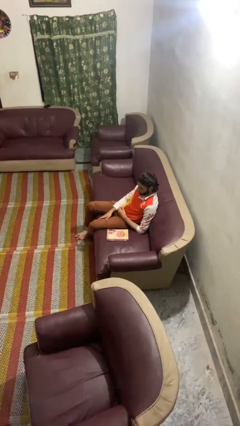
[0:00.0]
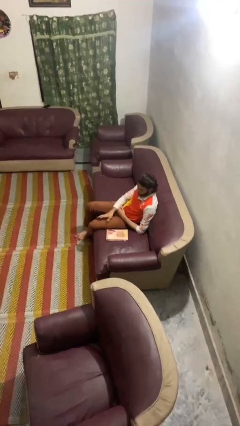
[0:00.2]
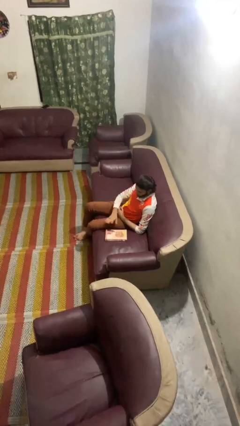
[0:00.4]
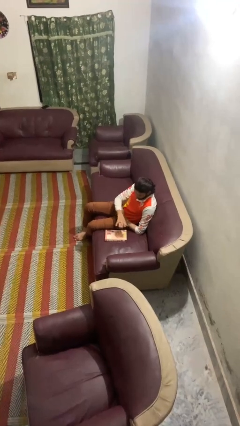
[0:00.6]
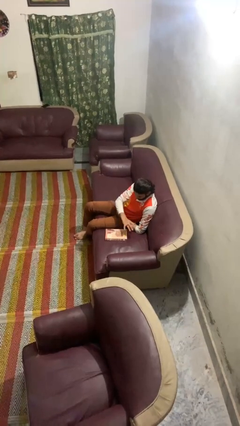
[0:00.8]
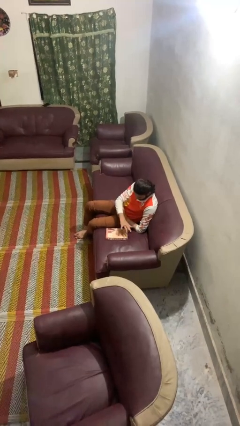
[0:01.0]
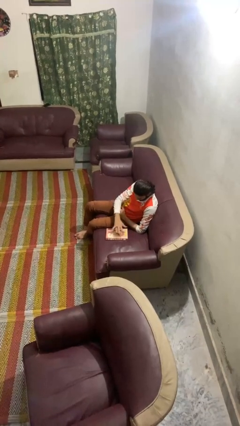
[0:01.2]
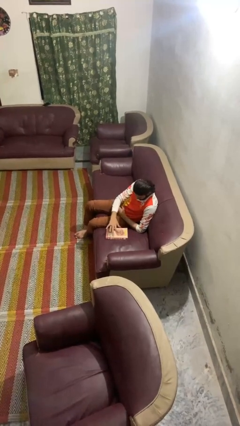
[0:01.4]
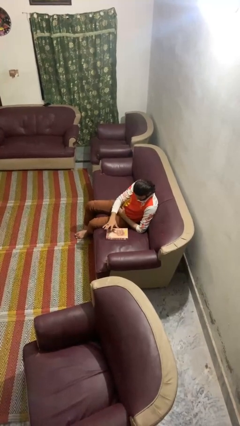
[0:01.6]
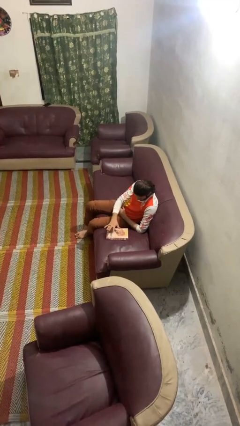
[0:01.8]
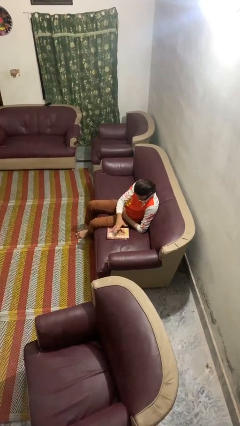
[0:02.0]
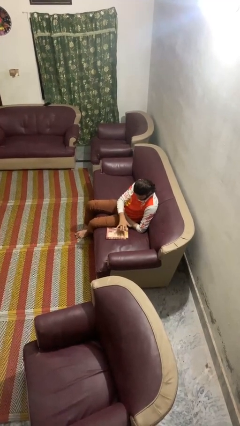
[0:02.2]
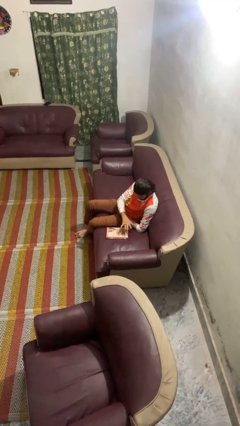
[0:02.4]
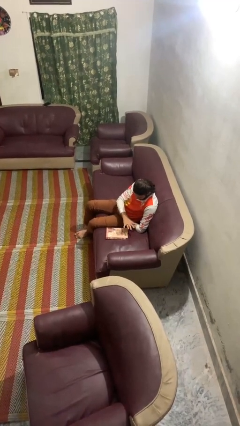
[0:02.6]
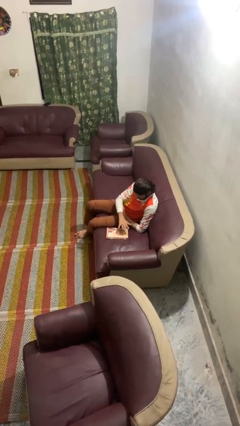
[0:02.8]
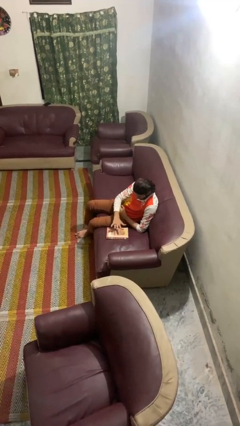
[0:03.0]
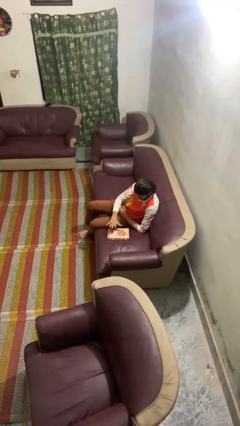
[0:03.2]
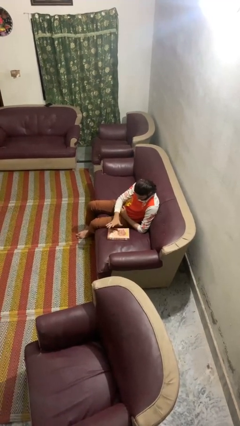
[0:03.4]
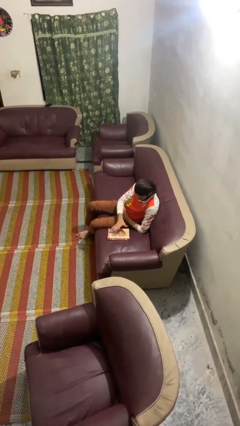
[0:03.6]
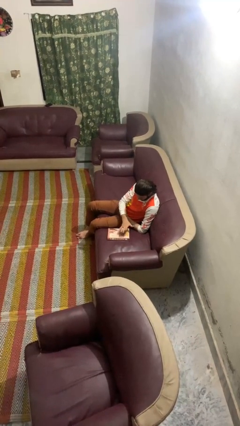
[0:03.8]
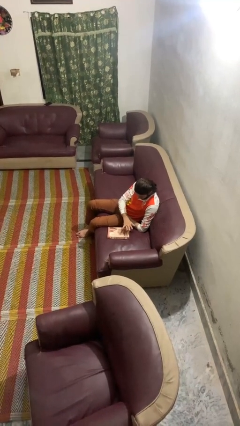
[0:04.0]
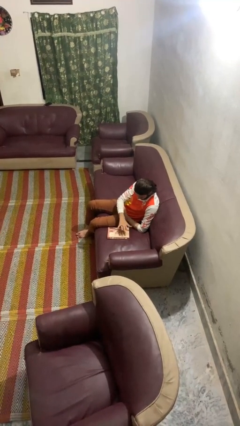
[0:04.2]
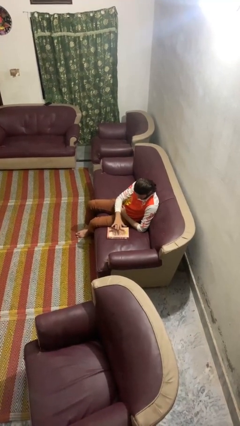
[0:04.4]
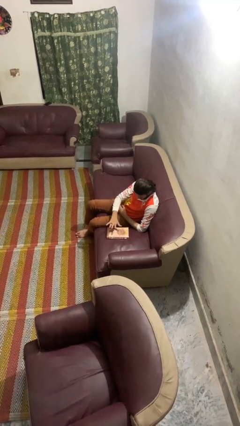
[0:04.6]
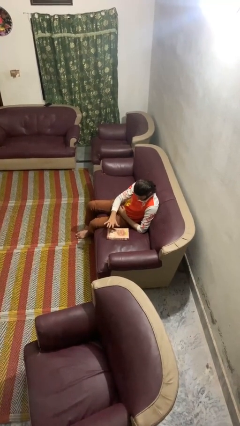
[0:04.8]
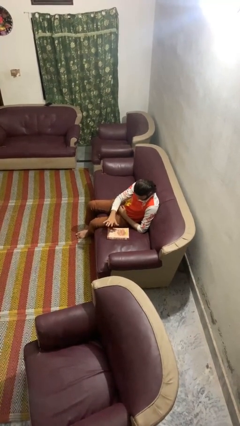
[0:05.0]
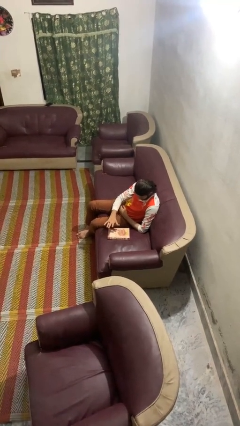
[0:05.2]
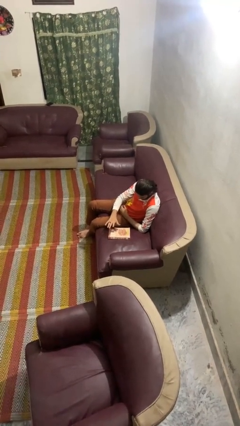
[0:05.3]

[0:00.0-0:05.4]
person waves hand over object

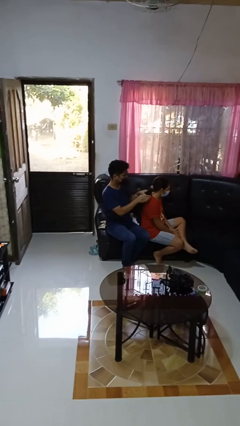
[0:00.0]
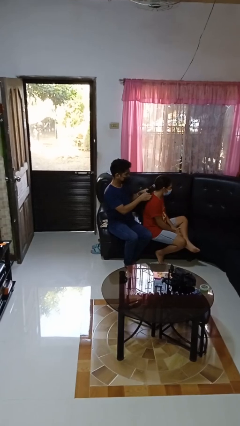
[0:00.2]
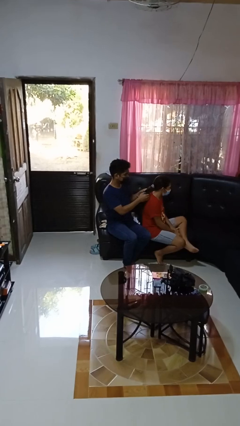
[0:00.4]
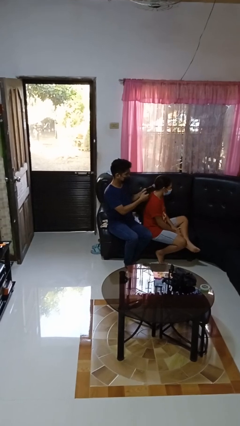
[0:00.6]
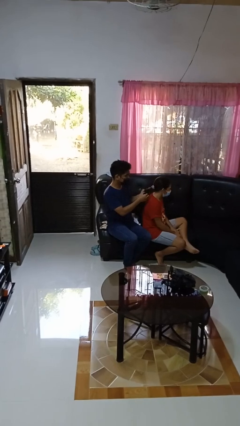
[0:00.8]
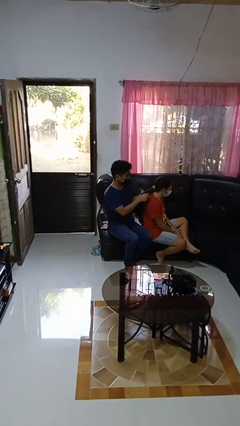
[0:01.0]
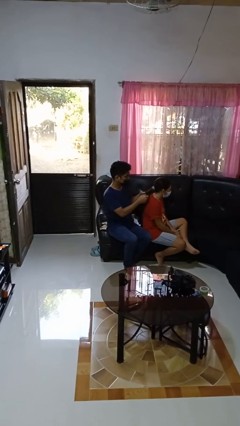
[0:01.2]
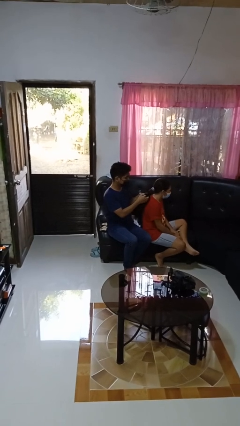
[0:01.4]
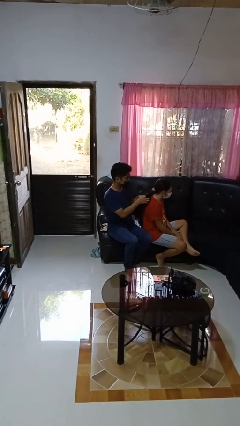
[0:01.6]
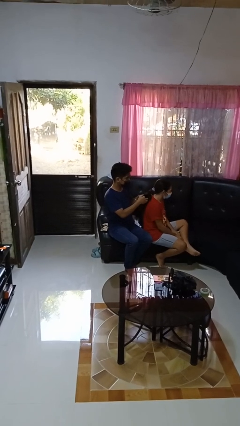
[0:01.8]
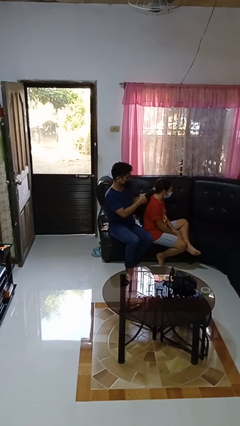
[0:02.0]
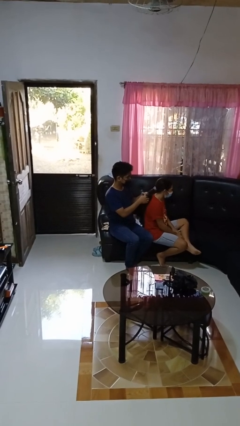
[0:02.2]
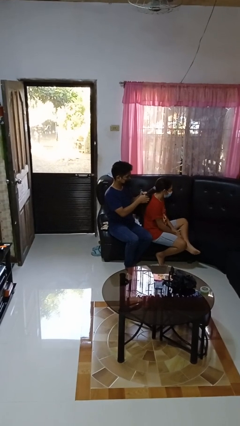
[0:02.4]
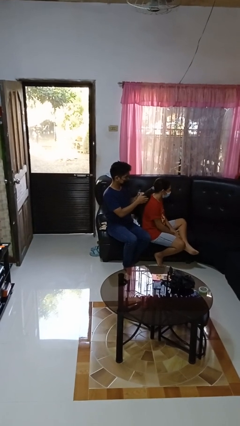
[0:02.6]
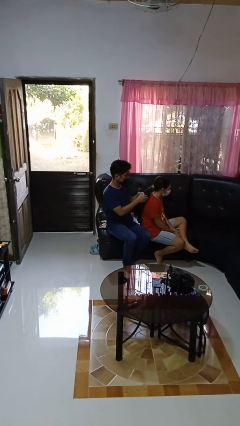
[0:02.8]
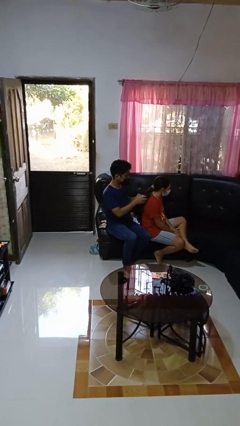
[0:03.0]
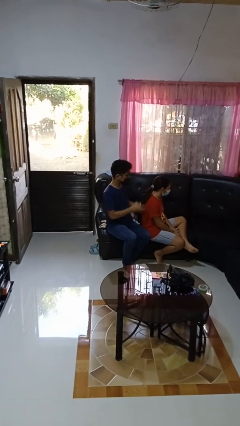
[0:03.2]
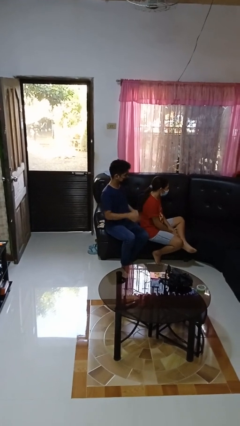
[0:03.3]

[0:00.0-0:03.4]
person braids hair of person

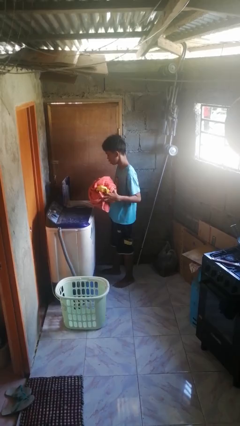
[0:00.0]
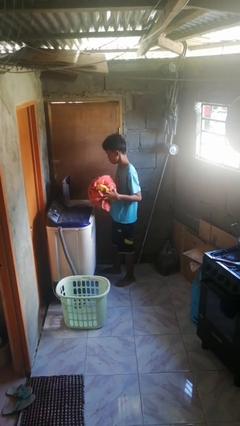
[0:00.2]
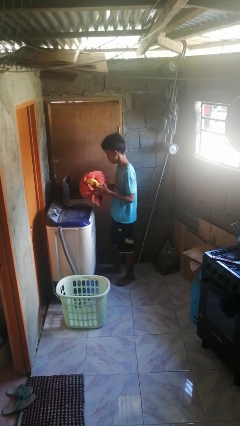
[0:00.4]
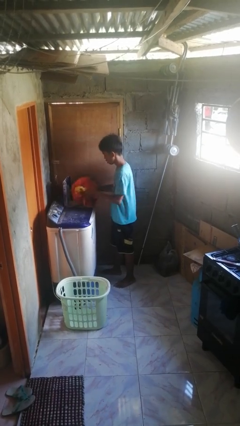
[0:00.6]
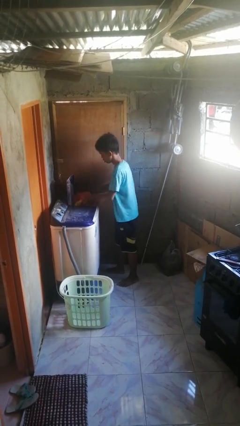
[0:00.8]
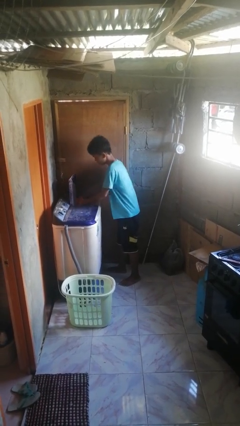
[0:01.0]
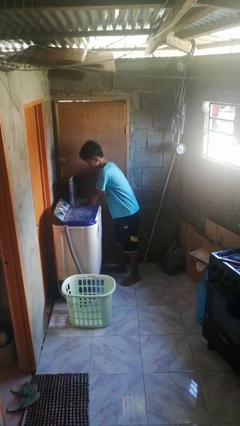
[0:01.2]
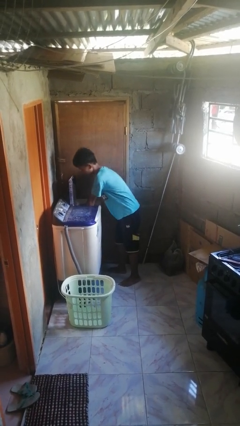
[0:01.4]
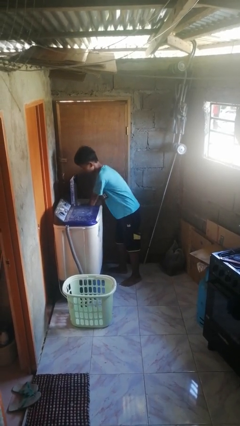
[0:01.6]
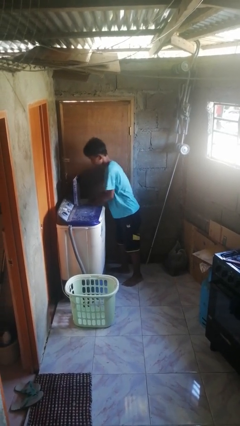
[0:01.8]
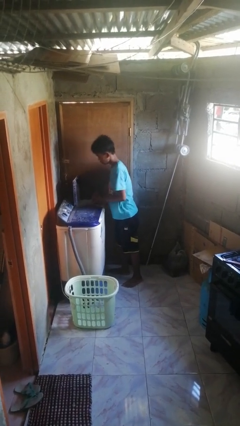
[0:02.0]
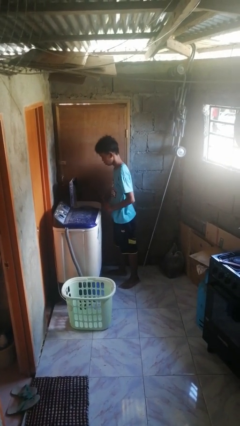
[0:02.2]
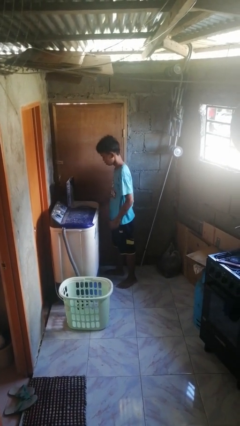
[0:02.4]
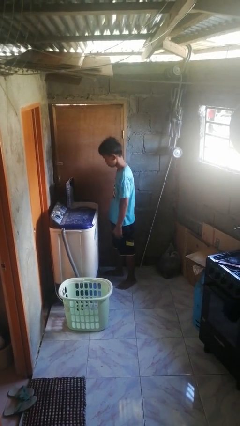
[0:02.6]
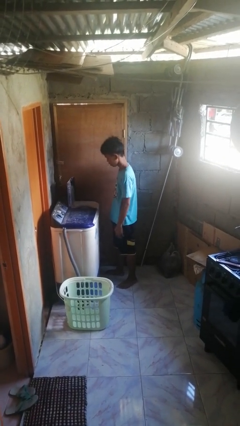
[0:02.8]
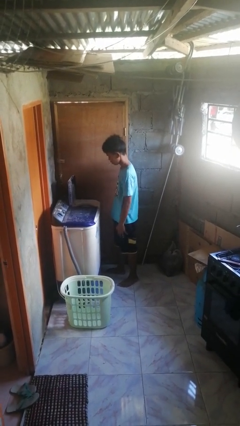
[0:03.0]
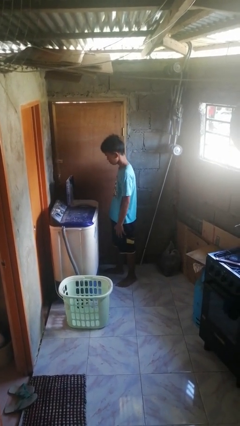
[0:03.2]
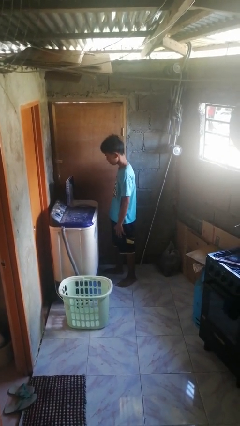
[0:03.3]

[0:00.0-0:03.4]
person loads dryer

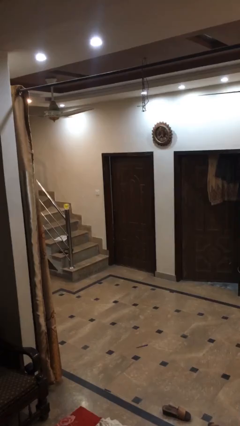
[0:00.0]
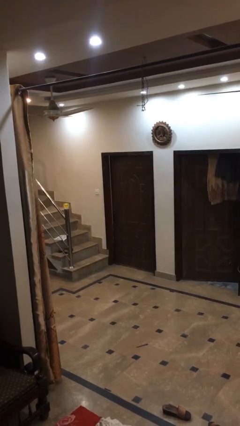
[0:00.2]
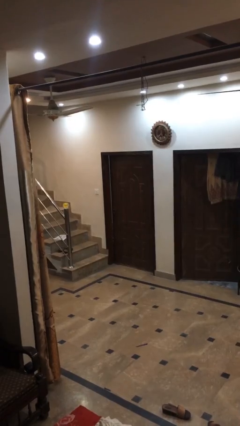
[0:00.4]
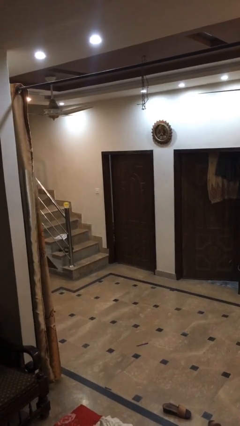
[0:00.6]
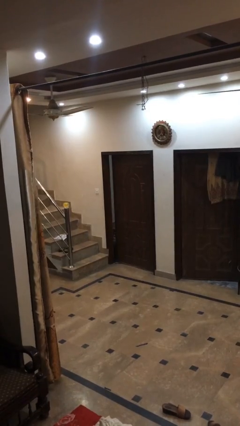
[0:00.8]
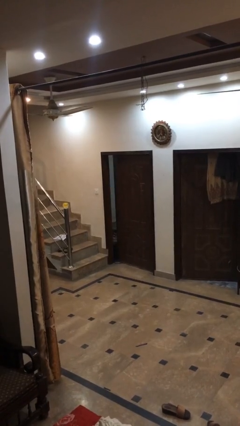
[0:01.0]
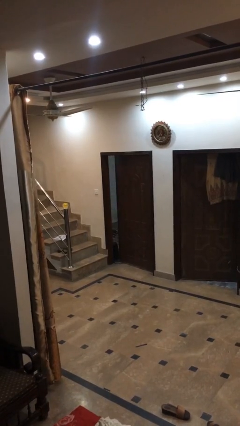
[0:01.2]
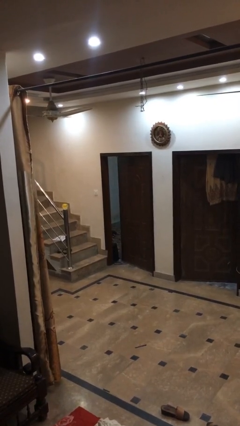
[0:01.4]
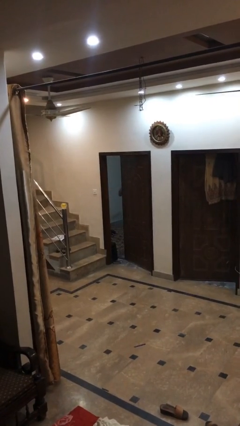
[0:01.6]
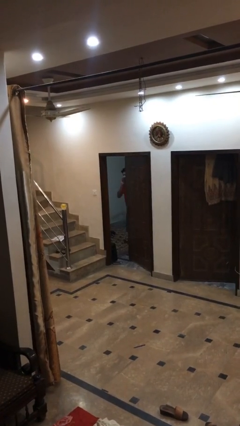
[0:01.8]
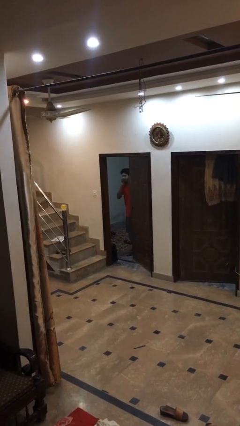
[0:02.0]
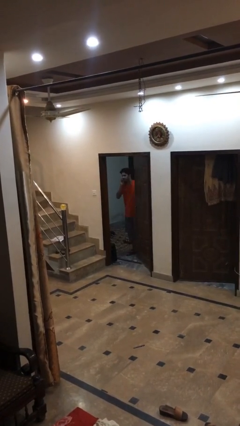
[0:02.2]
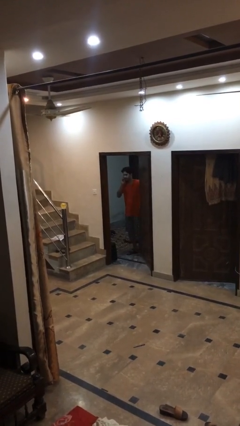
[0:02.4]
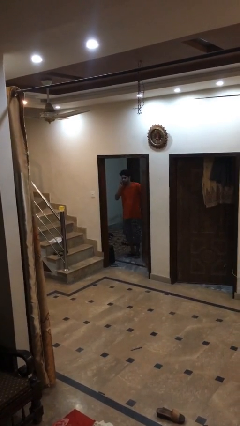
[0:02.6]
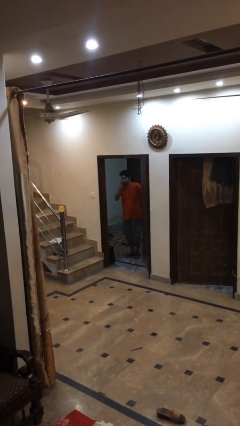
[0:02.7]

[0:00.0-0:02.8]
person opens facility door

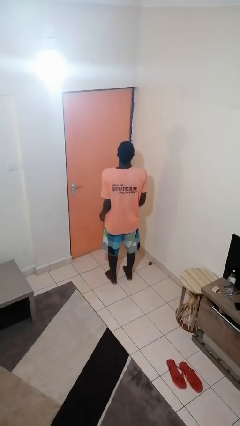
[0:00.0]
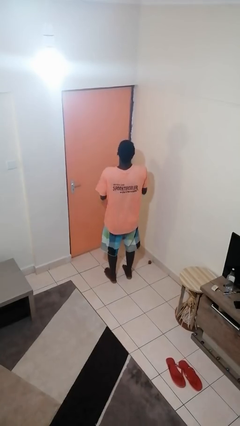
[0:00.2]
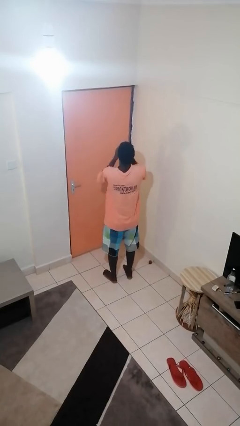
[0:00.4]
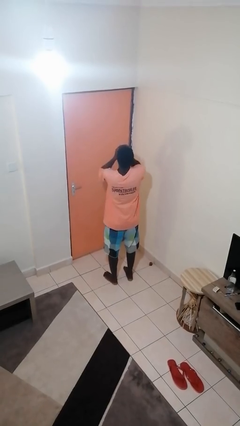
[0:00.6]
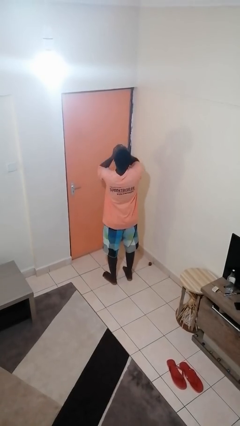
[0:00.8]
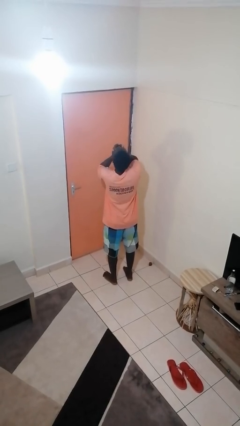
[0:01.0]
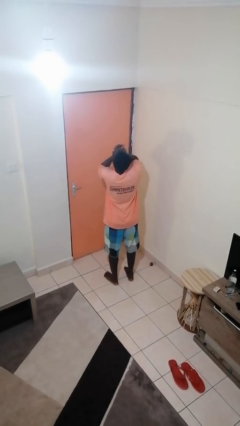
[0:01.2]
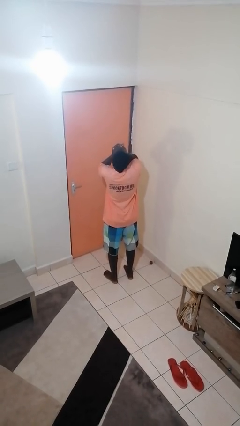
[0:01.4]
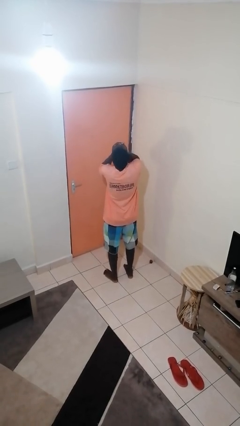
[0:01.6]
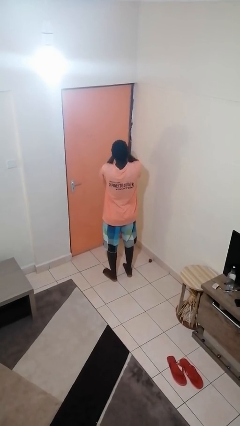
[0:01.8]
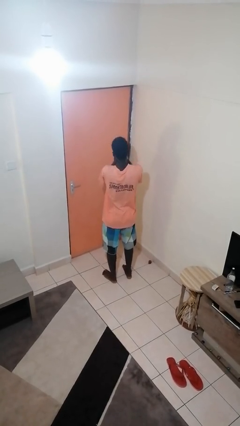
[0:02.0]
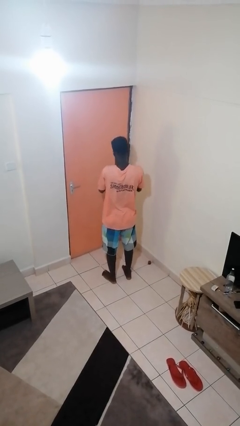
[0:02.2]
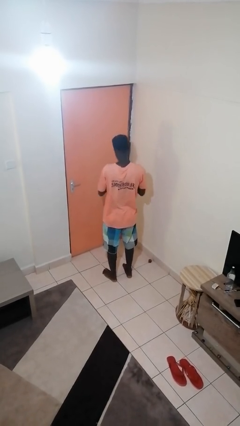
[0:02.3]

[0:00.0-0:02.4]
person yawns

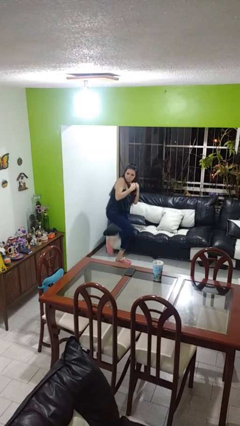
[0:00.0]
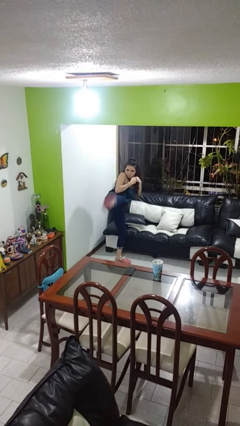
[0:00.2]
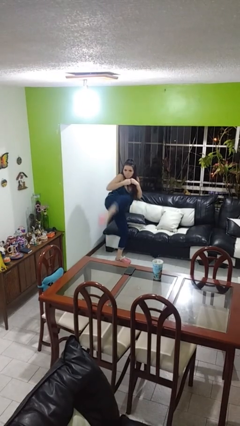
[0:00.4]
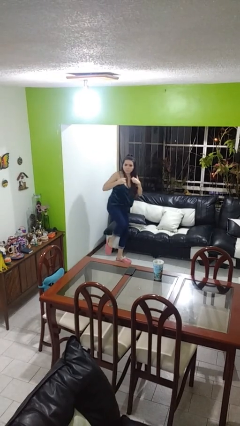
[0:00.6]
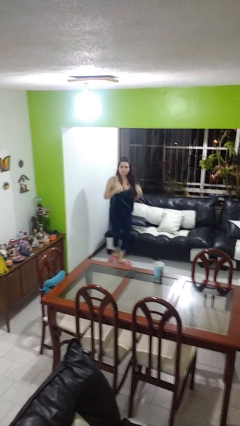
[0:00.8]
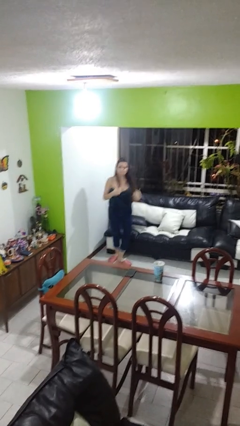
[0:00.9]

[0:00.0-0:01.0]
person karate kicks
